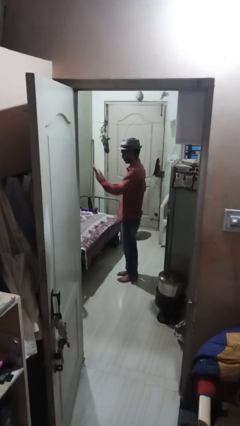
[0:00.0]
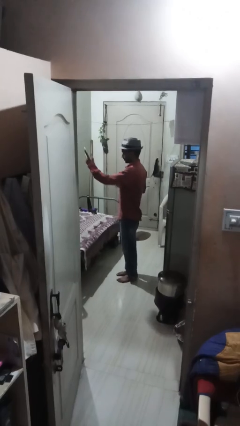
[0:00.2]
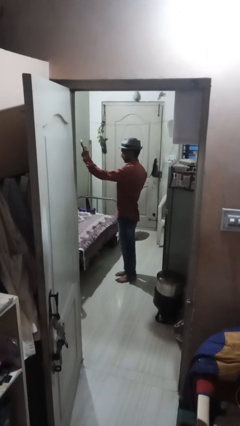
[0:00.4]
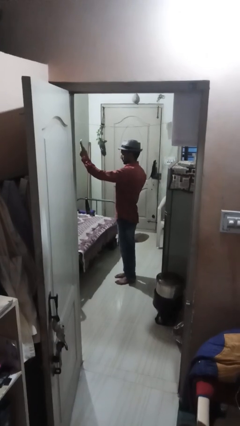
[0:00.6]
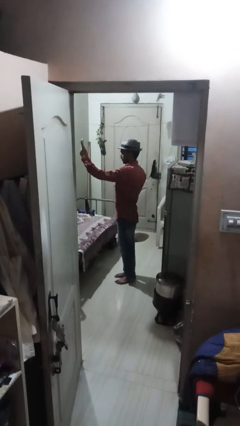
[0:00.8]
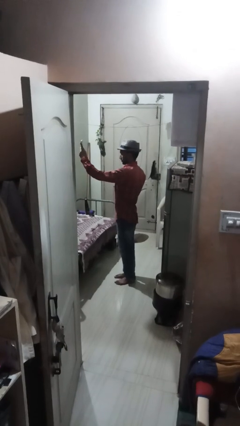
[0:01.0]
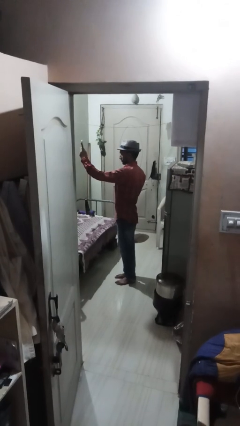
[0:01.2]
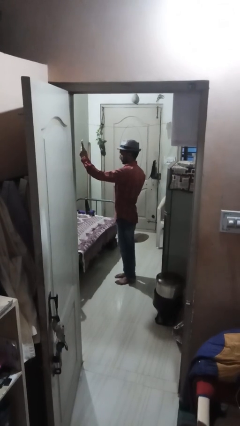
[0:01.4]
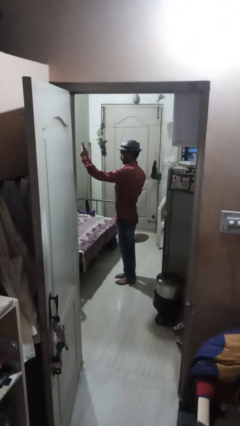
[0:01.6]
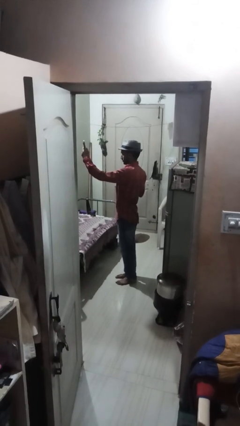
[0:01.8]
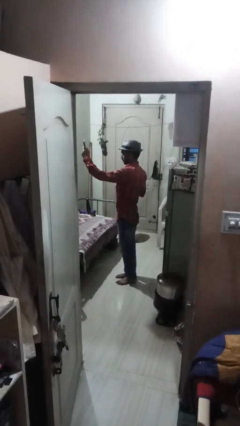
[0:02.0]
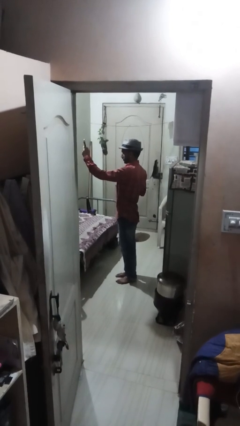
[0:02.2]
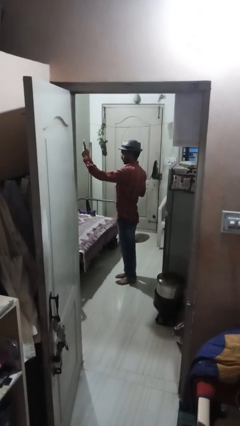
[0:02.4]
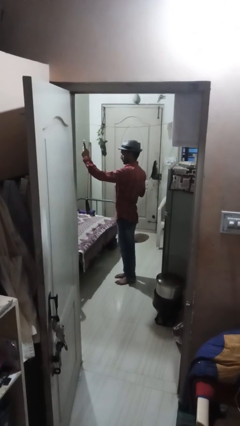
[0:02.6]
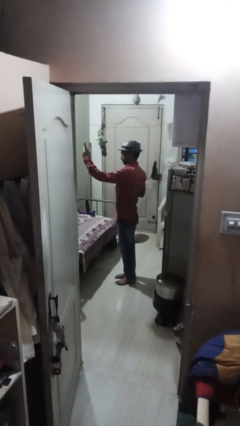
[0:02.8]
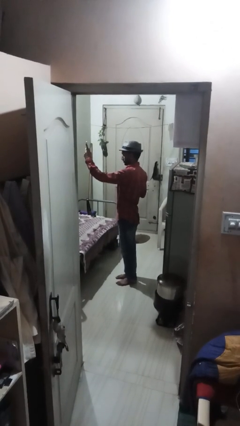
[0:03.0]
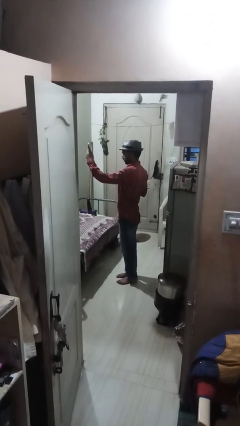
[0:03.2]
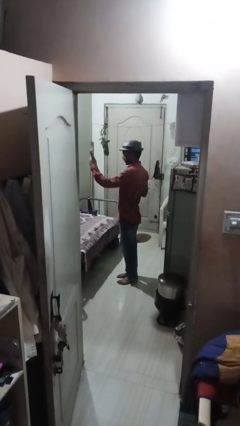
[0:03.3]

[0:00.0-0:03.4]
person takes selfie

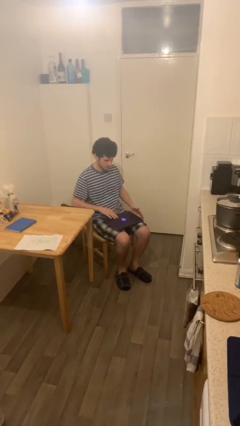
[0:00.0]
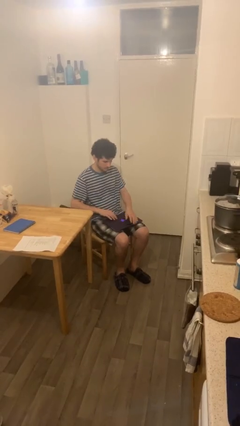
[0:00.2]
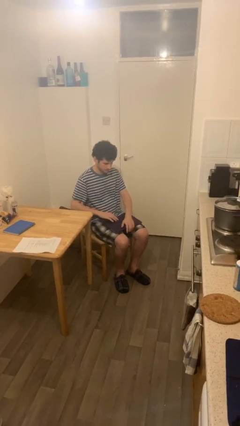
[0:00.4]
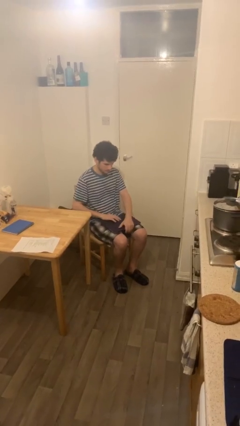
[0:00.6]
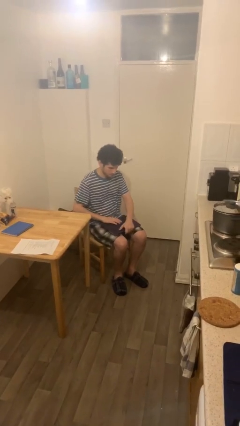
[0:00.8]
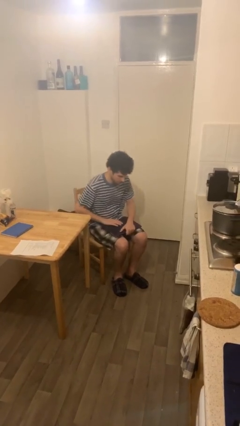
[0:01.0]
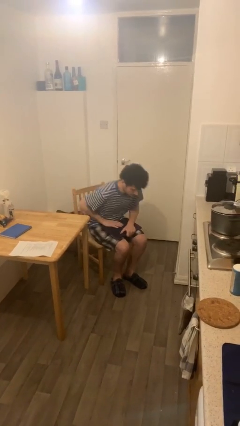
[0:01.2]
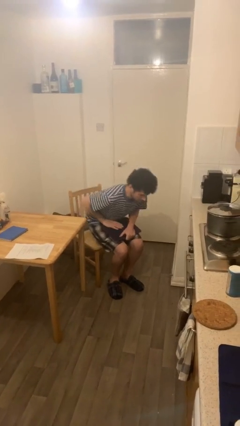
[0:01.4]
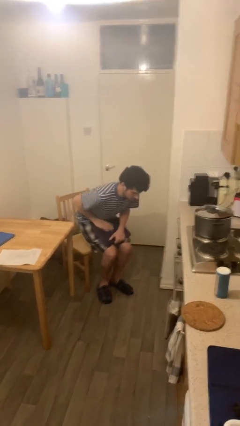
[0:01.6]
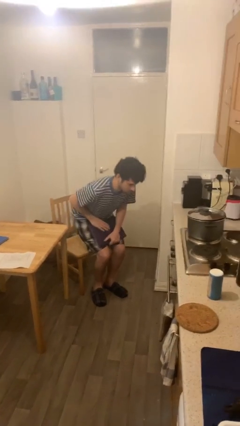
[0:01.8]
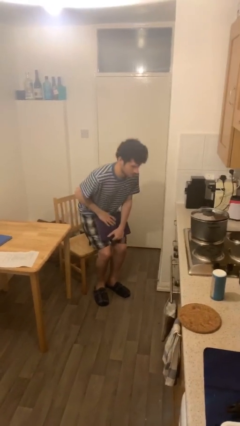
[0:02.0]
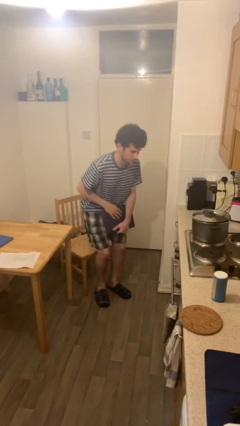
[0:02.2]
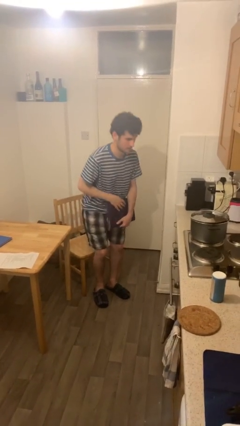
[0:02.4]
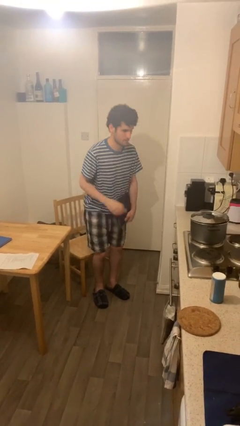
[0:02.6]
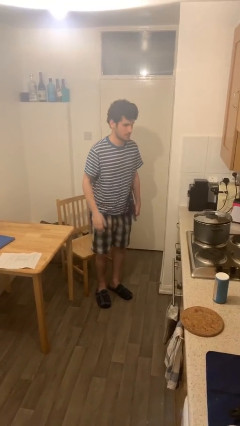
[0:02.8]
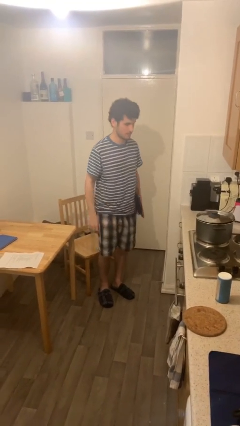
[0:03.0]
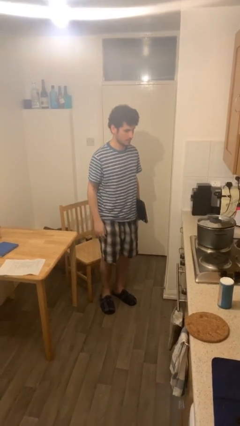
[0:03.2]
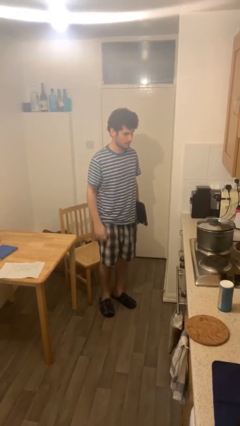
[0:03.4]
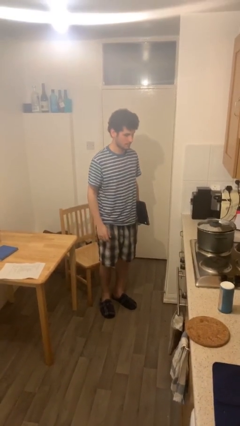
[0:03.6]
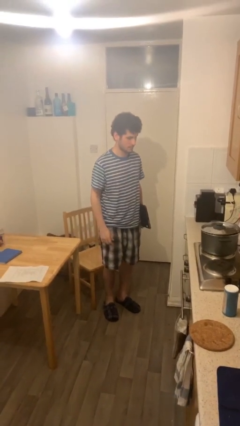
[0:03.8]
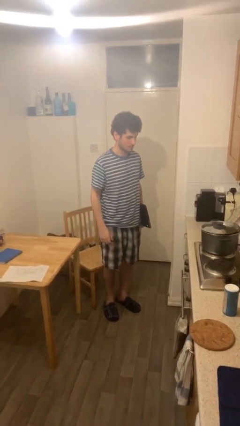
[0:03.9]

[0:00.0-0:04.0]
person stands up

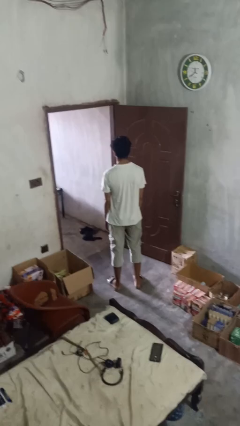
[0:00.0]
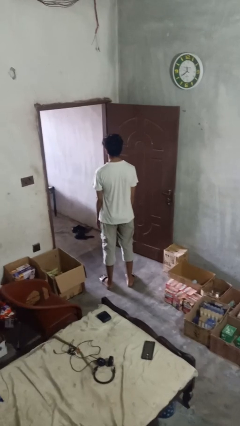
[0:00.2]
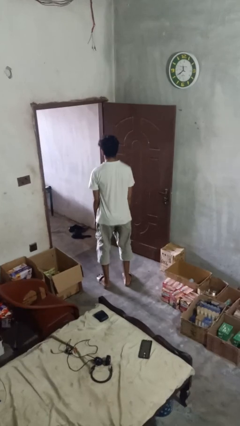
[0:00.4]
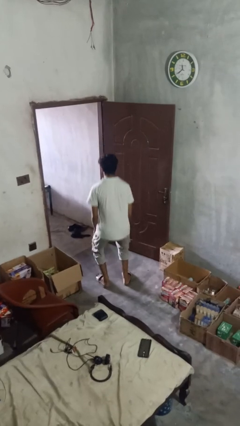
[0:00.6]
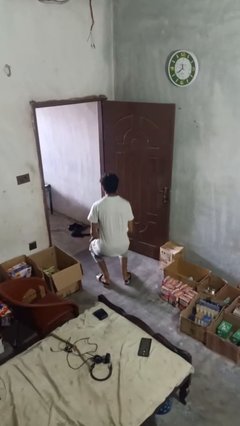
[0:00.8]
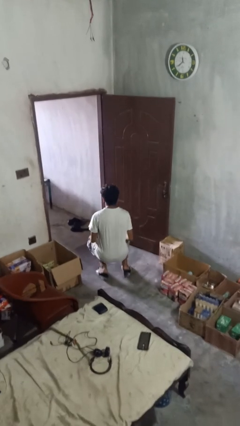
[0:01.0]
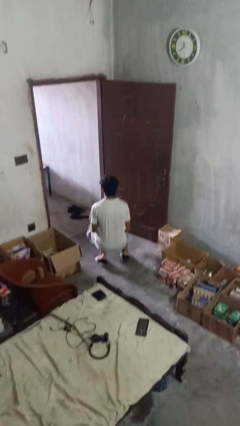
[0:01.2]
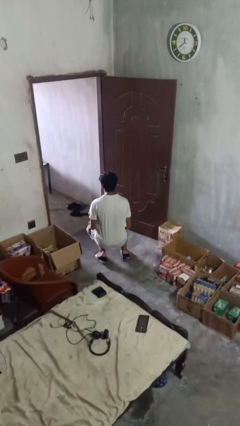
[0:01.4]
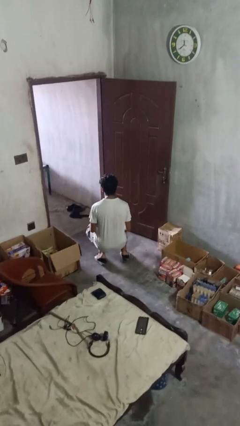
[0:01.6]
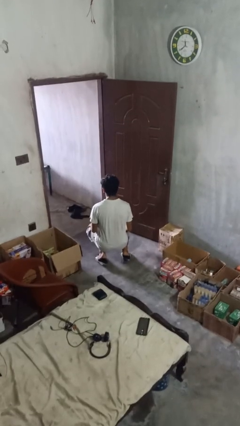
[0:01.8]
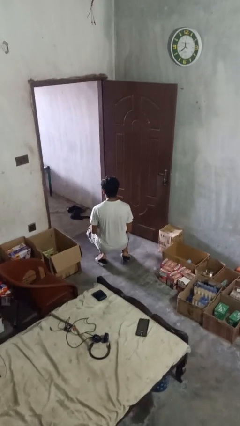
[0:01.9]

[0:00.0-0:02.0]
person kneels

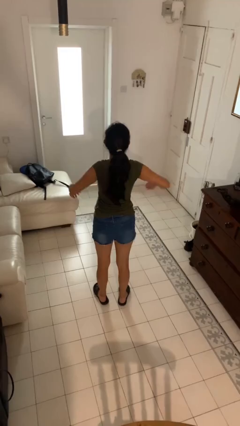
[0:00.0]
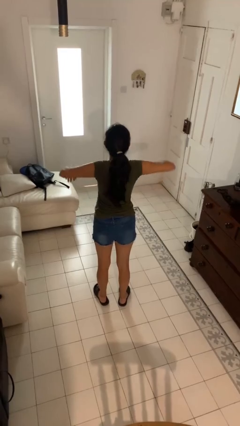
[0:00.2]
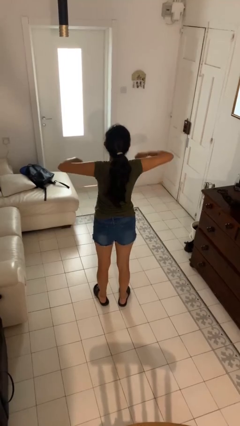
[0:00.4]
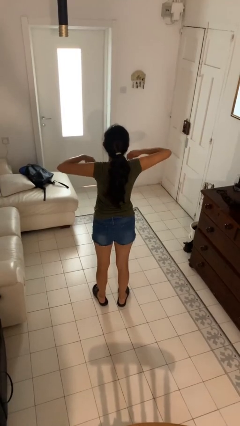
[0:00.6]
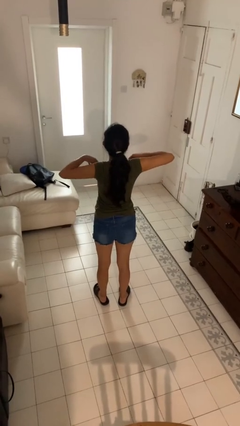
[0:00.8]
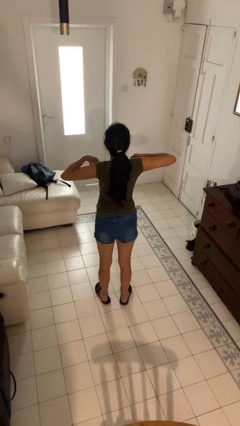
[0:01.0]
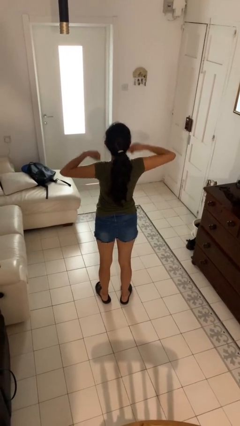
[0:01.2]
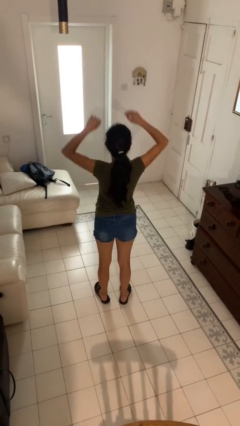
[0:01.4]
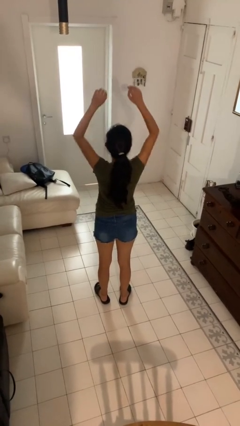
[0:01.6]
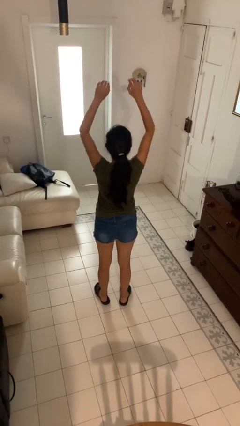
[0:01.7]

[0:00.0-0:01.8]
person stretches arms to side

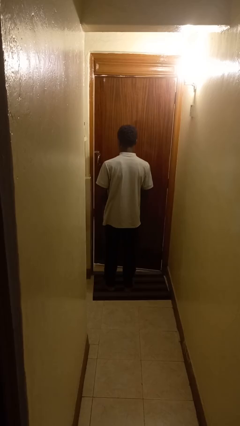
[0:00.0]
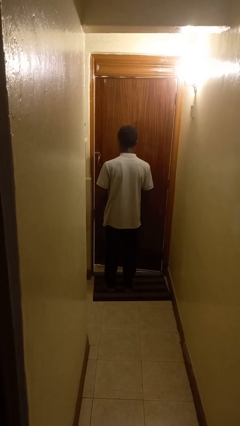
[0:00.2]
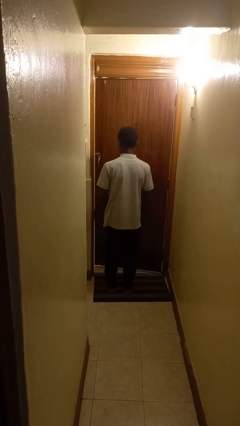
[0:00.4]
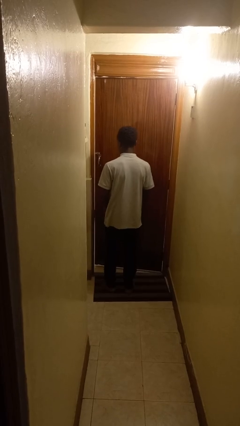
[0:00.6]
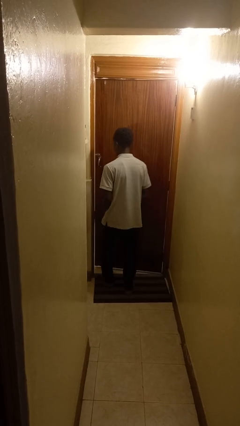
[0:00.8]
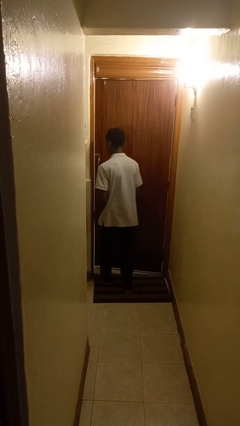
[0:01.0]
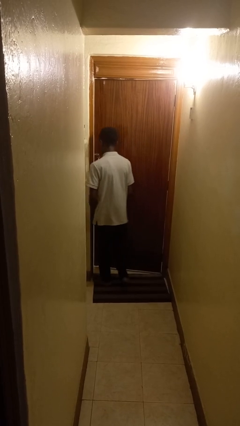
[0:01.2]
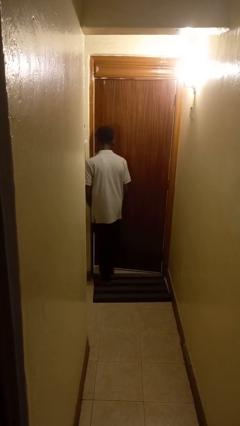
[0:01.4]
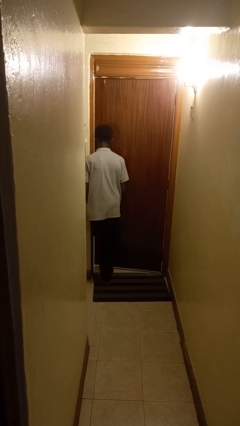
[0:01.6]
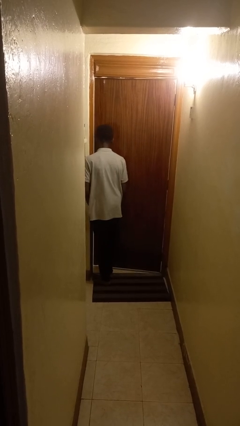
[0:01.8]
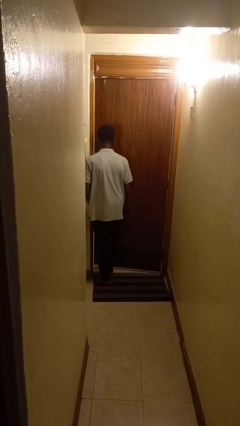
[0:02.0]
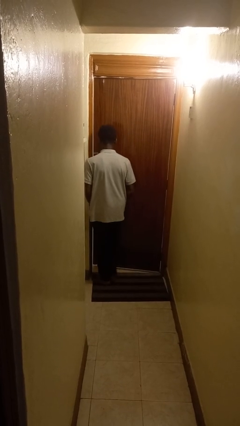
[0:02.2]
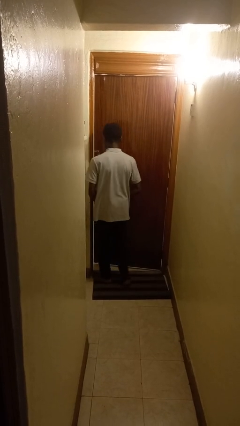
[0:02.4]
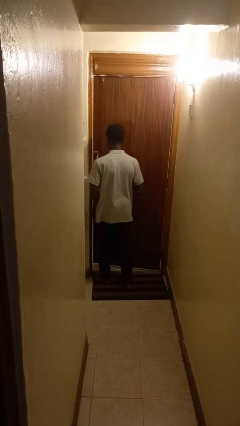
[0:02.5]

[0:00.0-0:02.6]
person bumps into wall

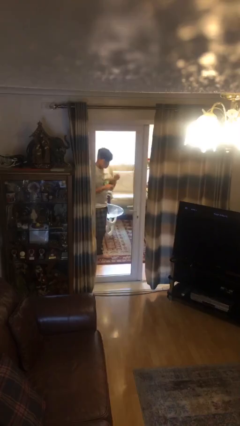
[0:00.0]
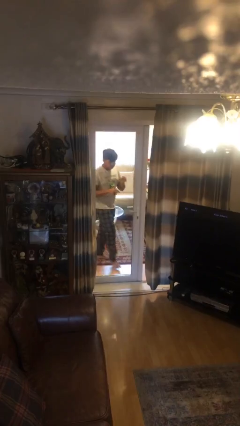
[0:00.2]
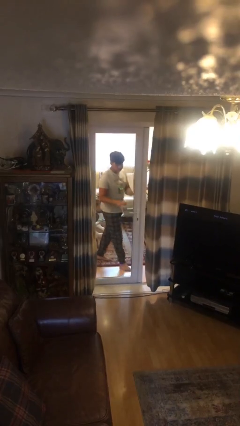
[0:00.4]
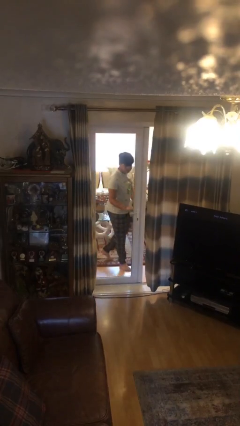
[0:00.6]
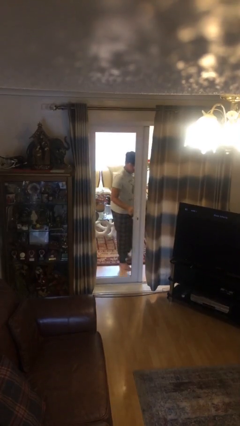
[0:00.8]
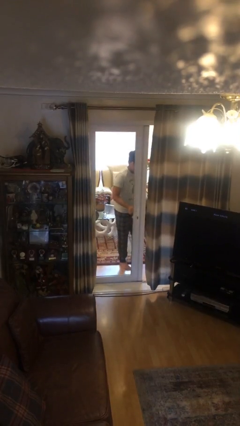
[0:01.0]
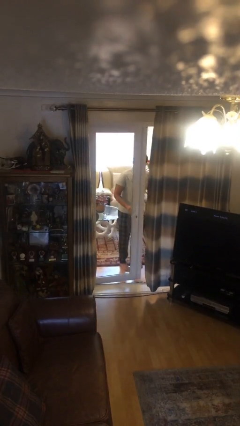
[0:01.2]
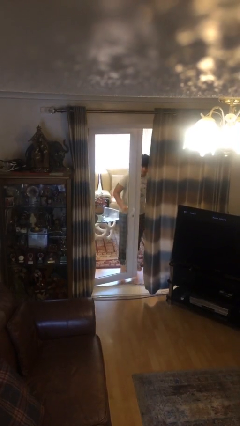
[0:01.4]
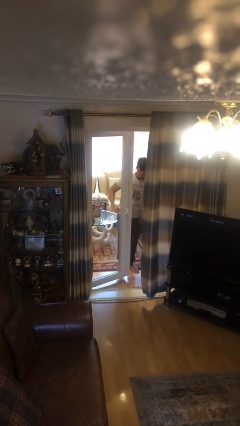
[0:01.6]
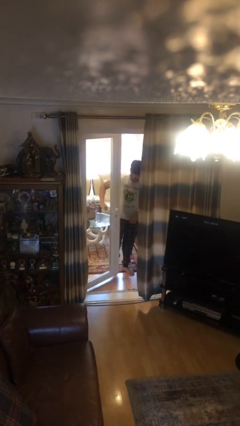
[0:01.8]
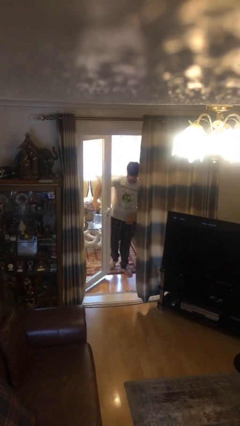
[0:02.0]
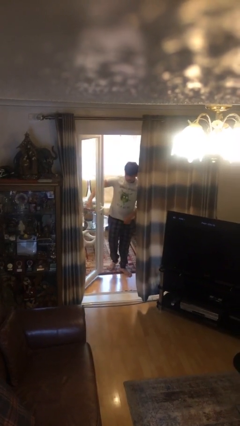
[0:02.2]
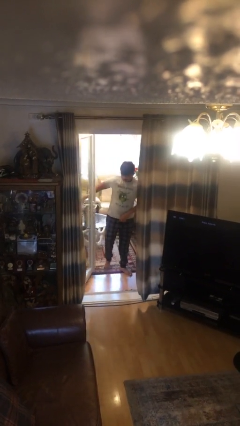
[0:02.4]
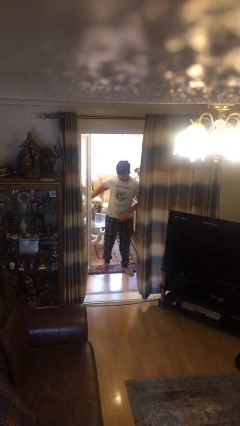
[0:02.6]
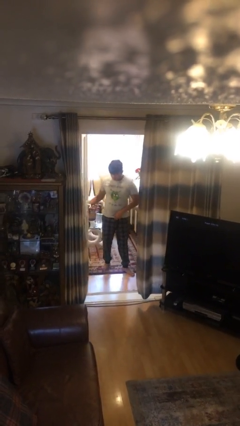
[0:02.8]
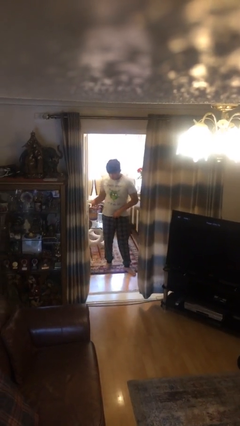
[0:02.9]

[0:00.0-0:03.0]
person opens facility door

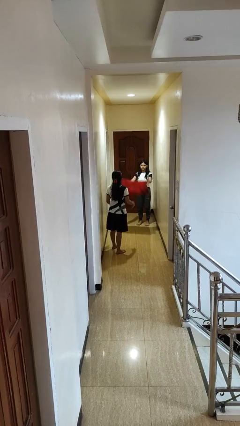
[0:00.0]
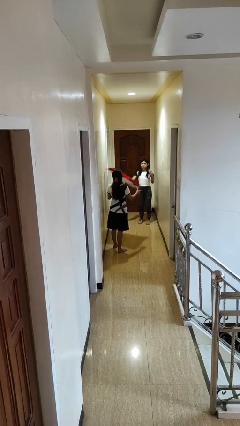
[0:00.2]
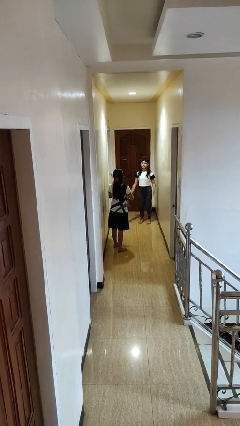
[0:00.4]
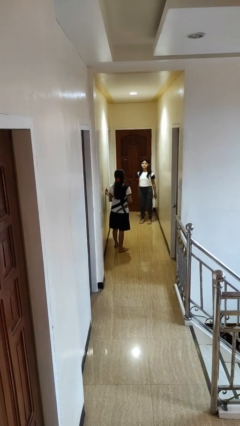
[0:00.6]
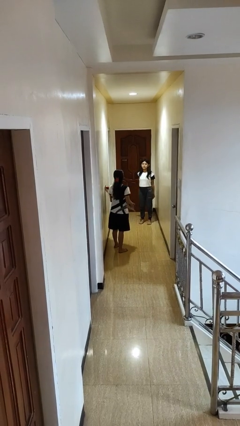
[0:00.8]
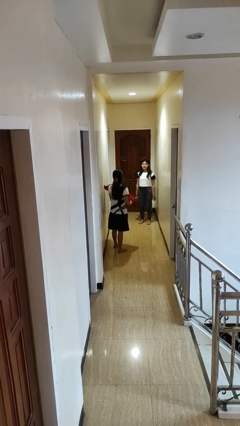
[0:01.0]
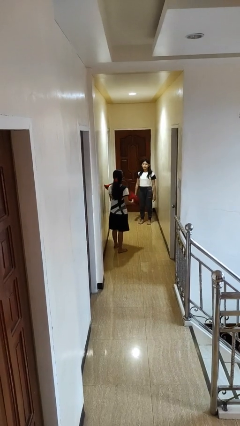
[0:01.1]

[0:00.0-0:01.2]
person catches object from person
